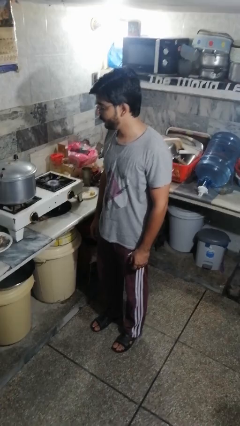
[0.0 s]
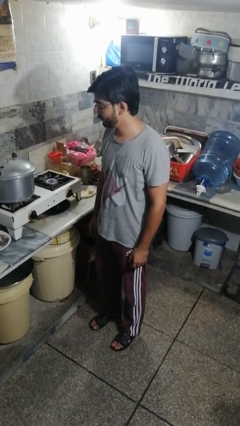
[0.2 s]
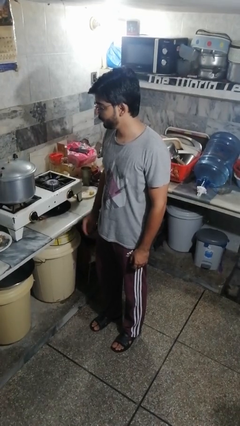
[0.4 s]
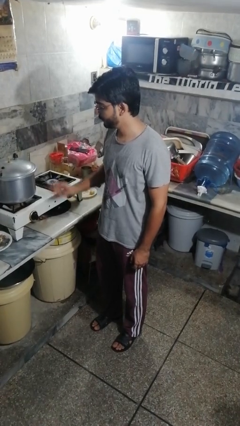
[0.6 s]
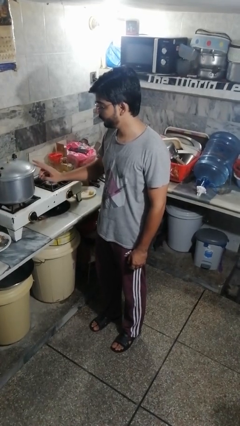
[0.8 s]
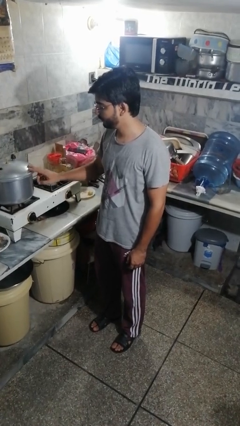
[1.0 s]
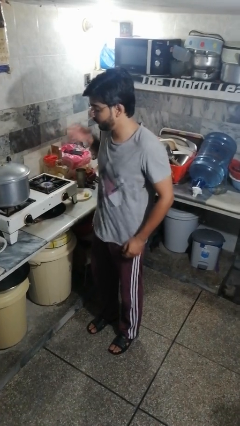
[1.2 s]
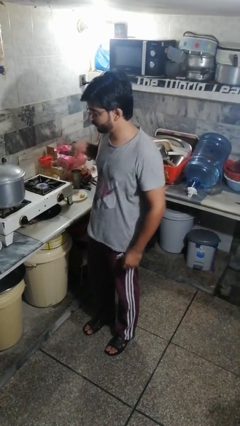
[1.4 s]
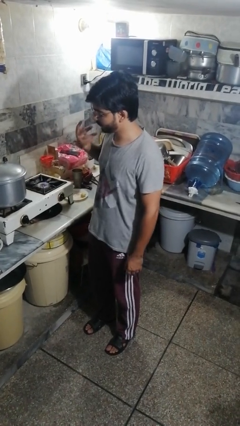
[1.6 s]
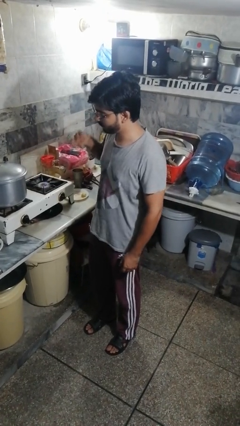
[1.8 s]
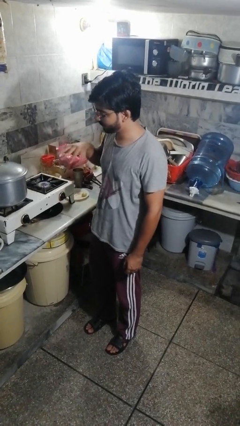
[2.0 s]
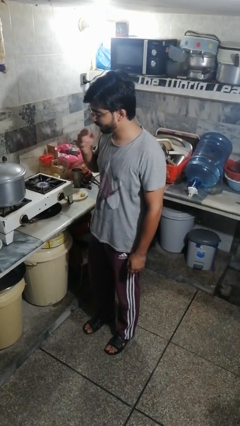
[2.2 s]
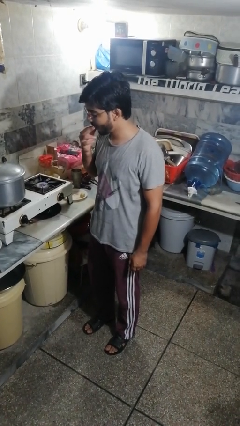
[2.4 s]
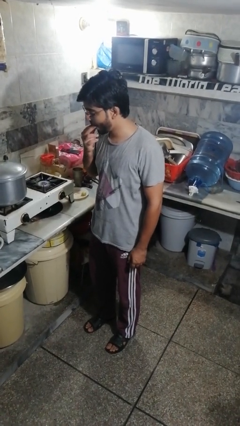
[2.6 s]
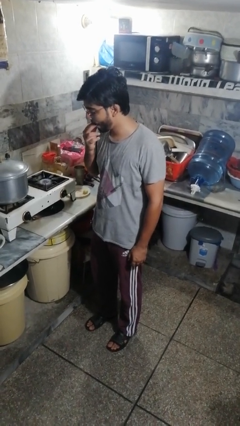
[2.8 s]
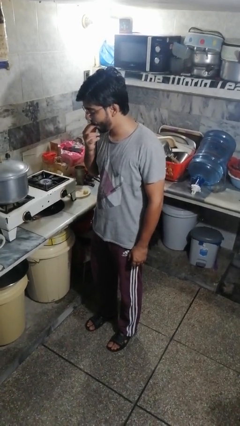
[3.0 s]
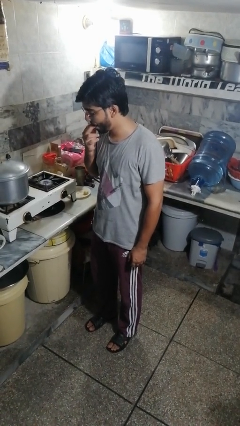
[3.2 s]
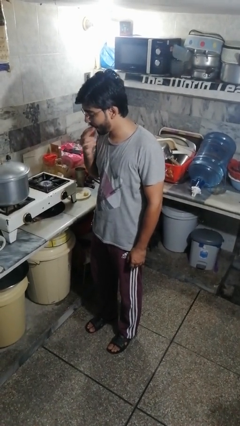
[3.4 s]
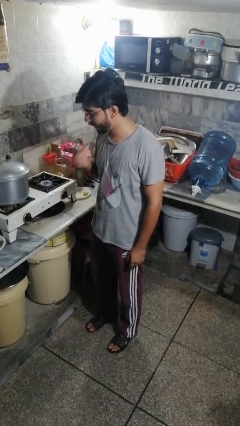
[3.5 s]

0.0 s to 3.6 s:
person burns hand

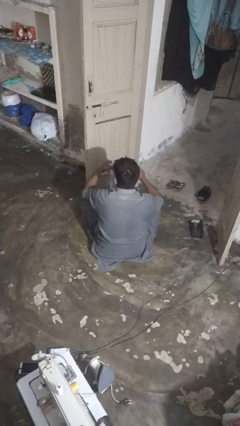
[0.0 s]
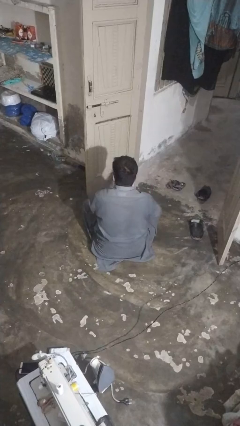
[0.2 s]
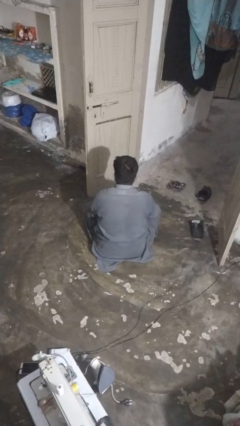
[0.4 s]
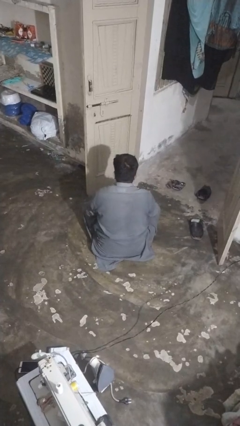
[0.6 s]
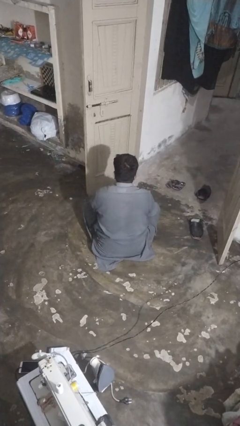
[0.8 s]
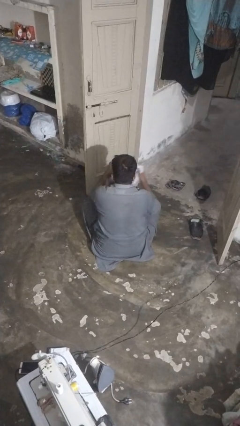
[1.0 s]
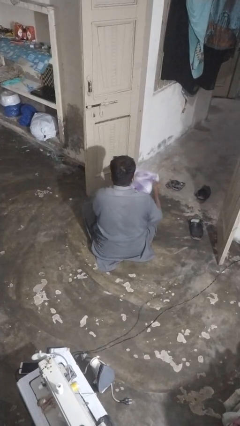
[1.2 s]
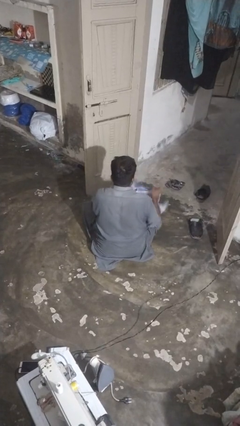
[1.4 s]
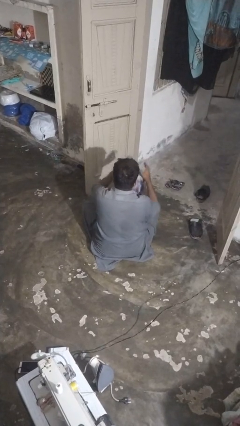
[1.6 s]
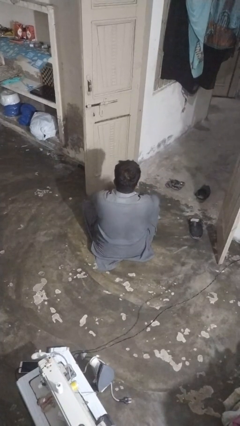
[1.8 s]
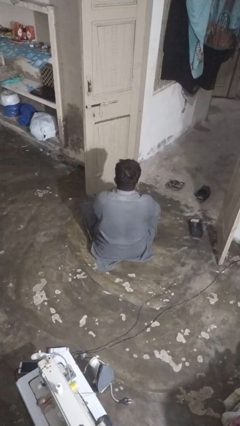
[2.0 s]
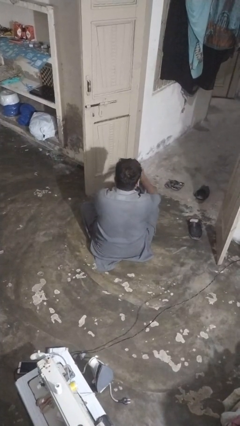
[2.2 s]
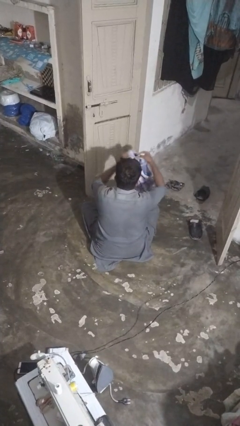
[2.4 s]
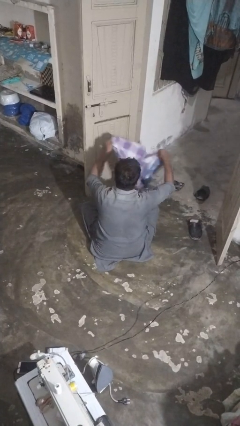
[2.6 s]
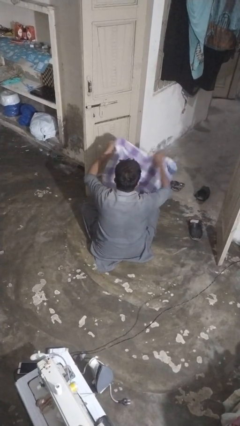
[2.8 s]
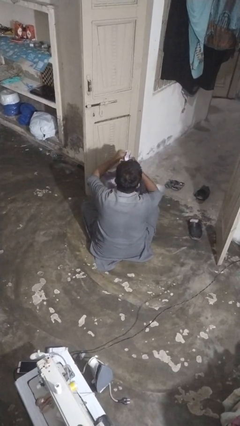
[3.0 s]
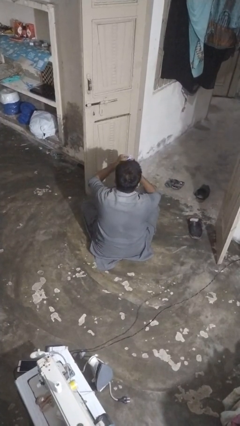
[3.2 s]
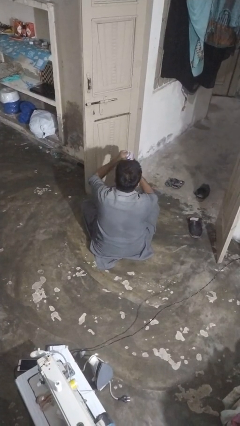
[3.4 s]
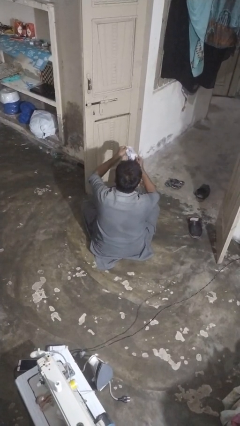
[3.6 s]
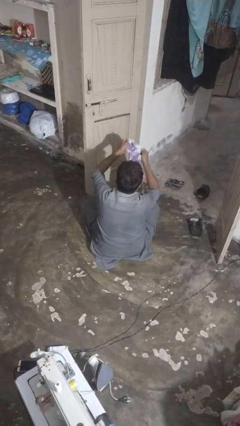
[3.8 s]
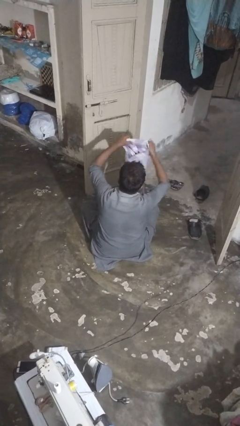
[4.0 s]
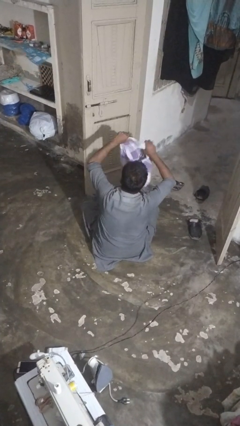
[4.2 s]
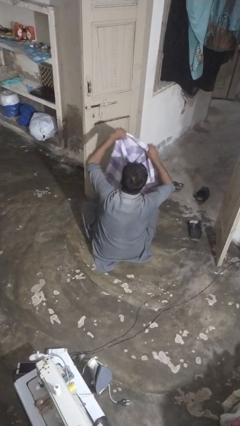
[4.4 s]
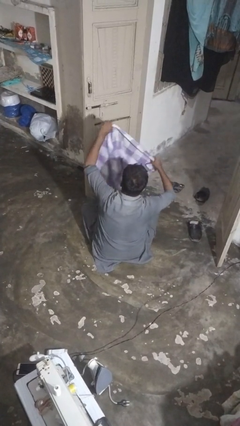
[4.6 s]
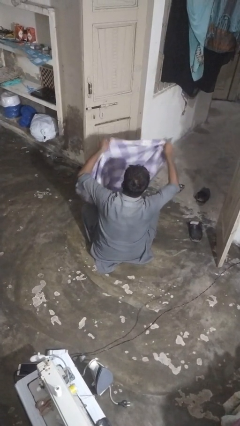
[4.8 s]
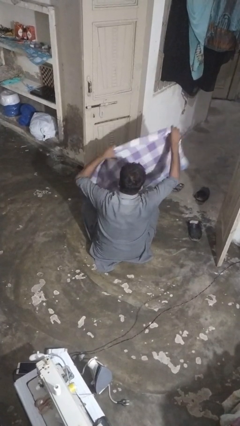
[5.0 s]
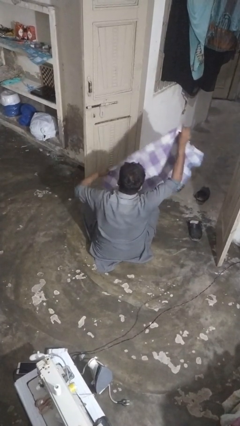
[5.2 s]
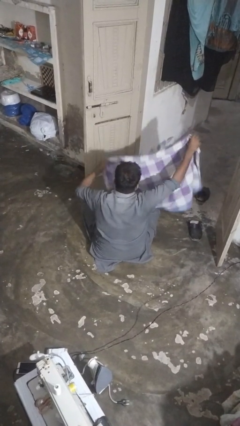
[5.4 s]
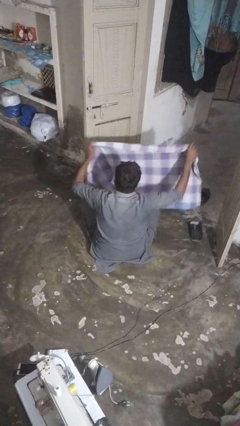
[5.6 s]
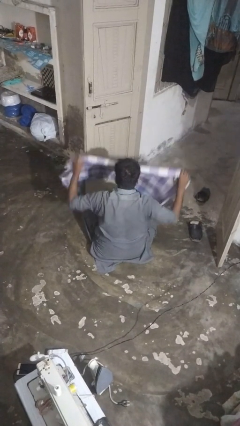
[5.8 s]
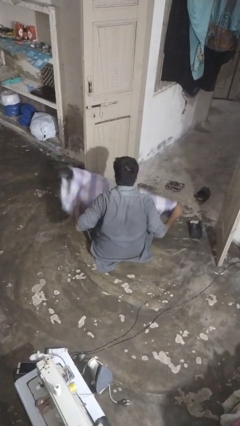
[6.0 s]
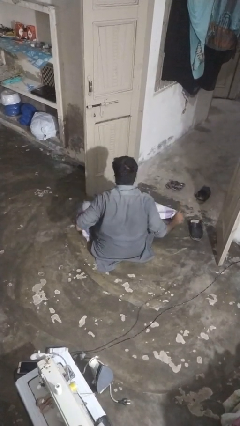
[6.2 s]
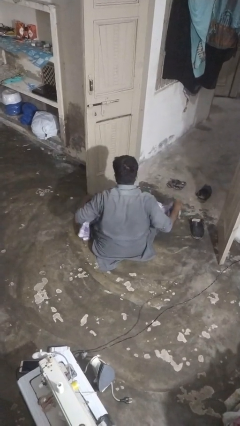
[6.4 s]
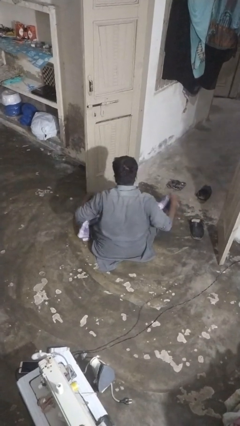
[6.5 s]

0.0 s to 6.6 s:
person unfolds blanket

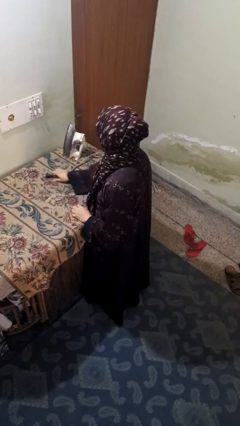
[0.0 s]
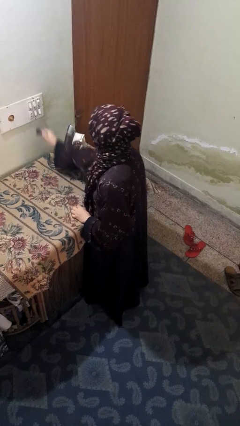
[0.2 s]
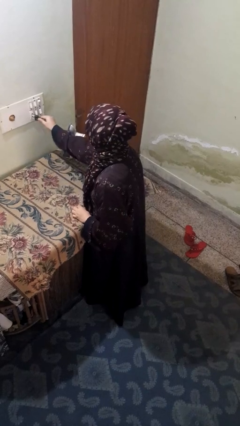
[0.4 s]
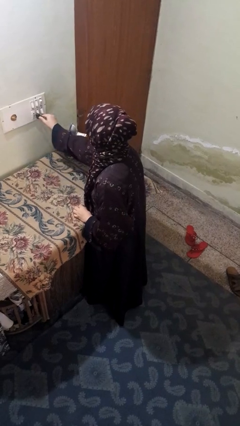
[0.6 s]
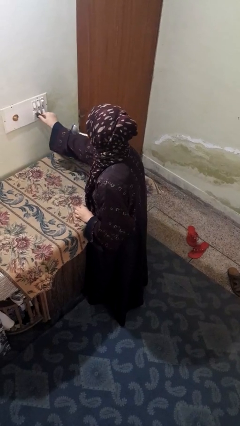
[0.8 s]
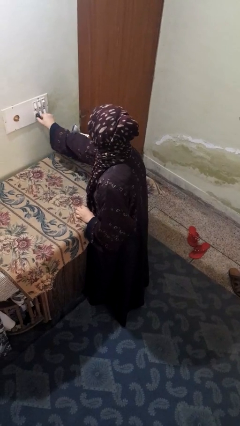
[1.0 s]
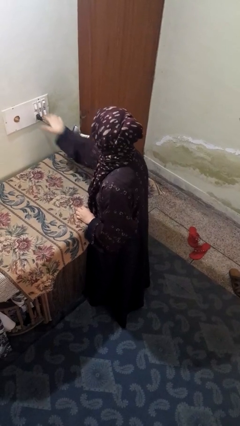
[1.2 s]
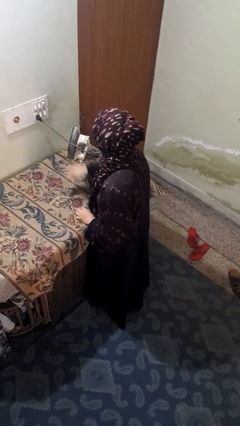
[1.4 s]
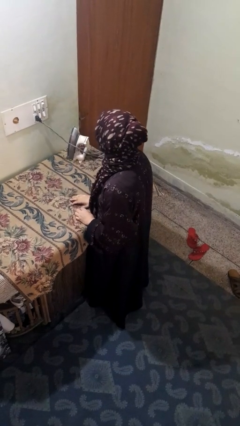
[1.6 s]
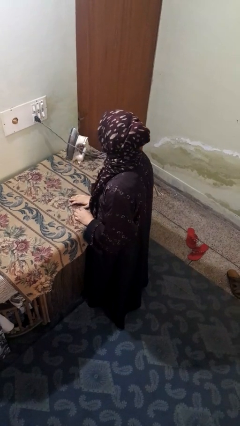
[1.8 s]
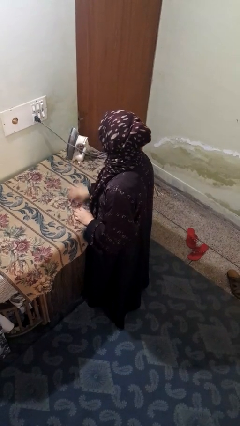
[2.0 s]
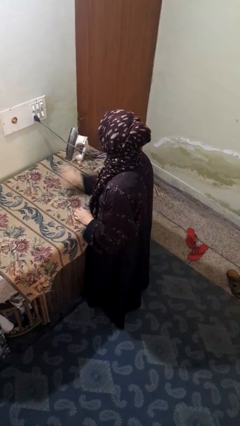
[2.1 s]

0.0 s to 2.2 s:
person plugs into electrical socket

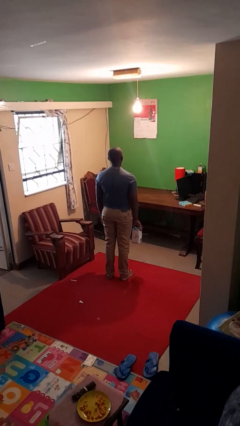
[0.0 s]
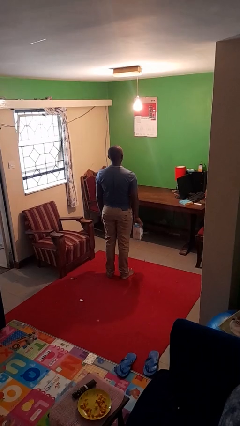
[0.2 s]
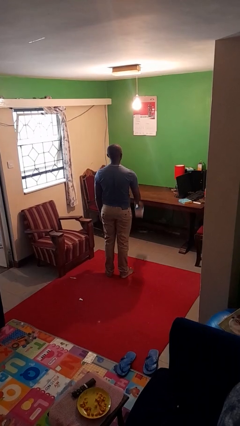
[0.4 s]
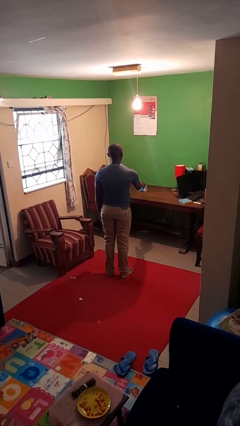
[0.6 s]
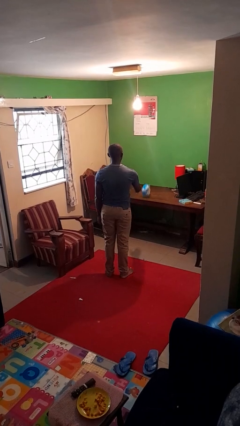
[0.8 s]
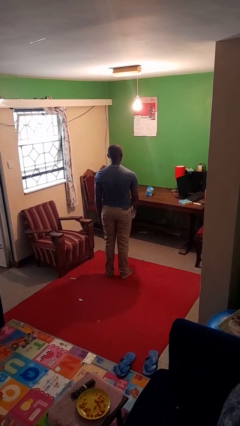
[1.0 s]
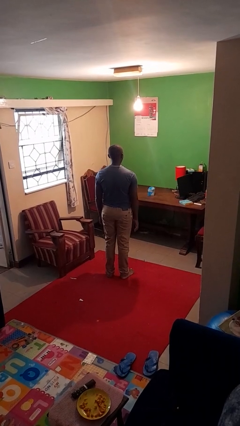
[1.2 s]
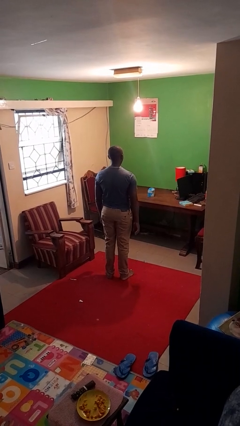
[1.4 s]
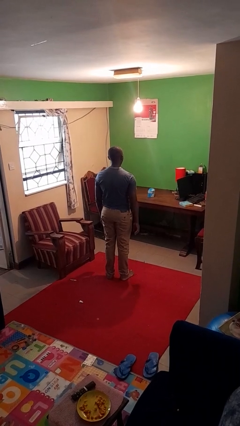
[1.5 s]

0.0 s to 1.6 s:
person throws object on table

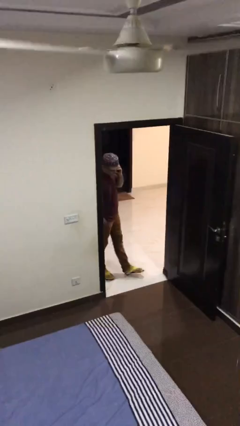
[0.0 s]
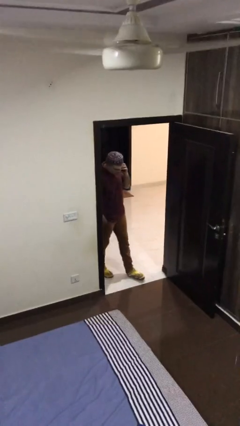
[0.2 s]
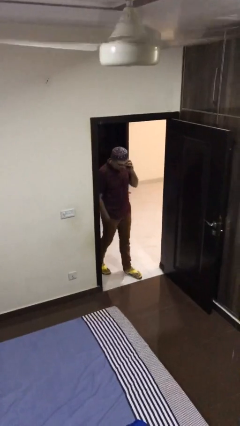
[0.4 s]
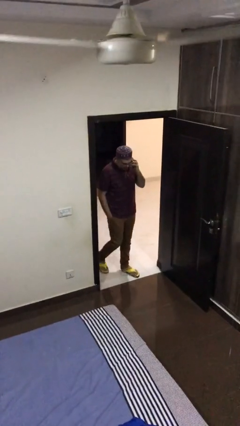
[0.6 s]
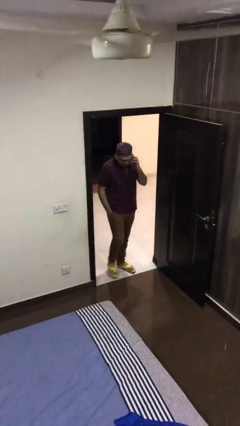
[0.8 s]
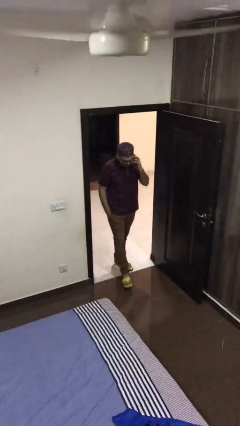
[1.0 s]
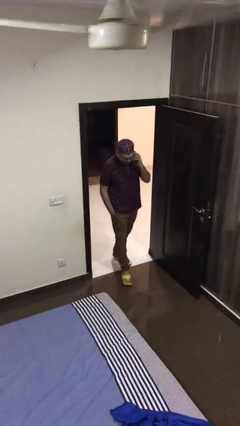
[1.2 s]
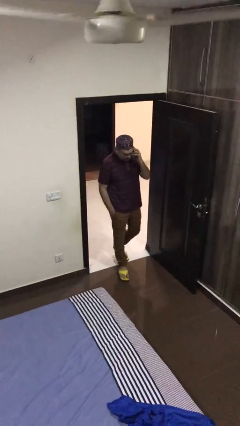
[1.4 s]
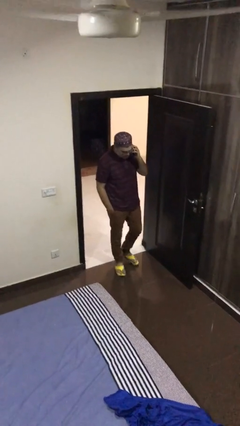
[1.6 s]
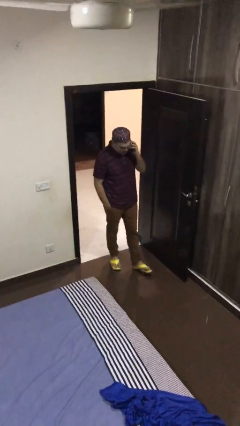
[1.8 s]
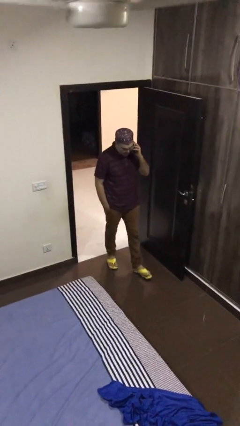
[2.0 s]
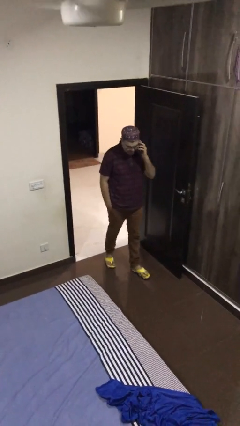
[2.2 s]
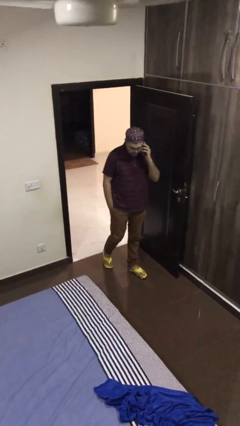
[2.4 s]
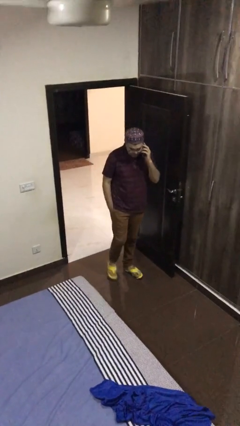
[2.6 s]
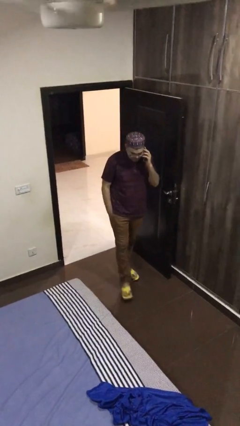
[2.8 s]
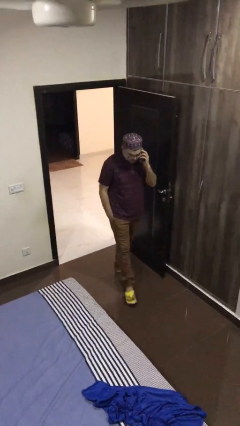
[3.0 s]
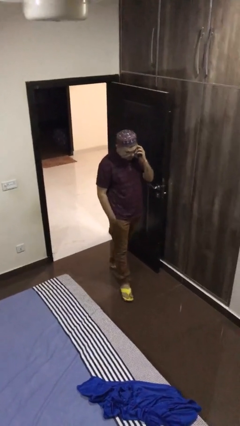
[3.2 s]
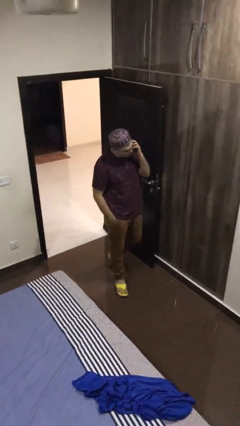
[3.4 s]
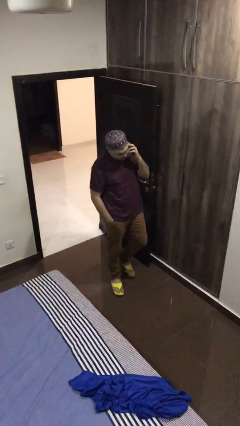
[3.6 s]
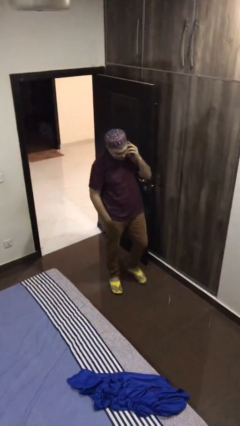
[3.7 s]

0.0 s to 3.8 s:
person enters scene through structure
